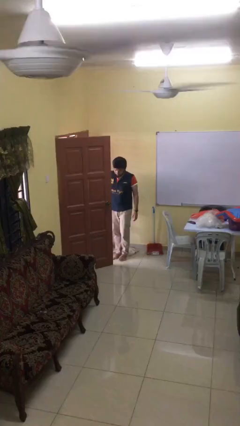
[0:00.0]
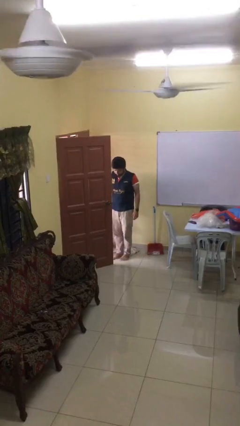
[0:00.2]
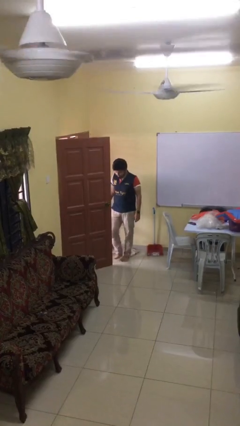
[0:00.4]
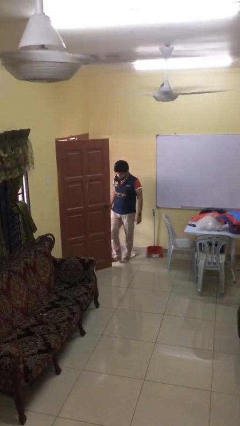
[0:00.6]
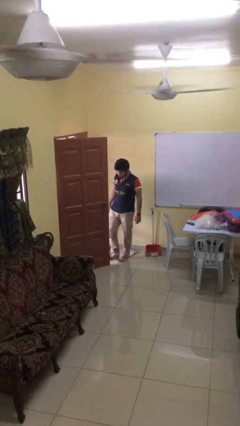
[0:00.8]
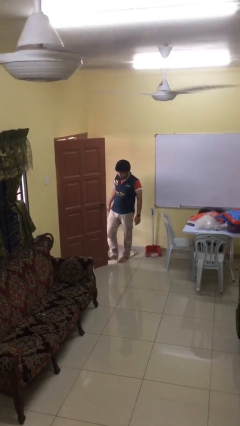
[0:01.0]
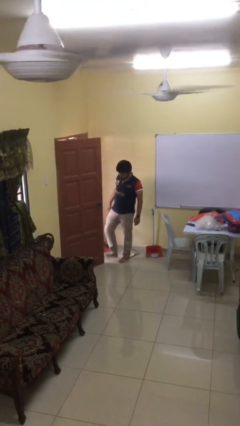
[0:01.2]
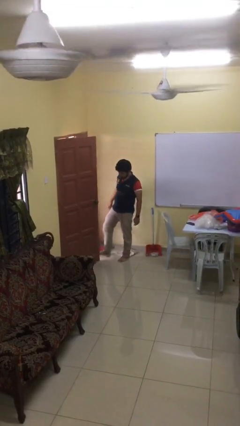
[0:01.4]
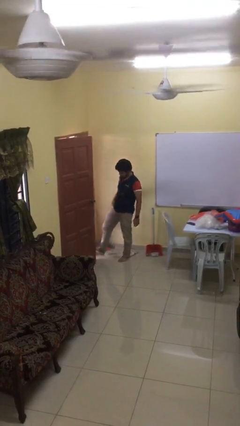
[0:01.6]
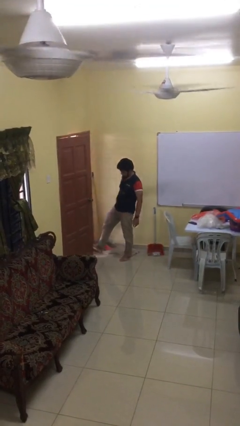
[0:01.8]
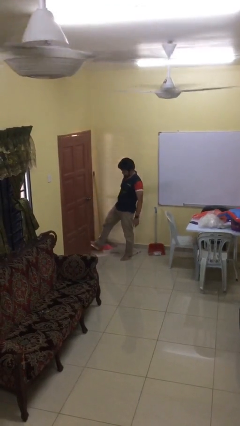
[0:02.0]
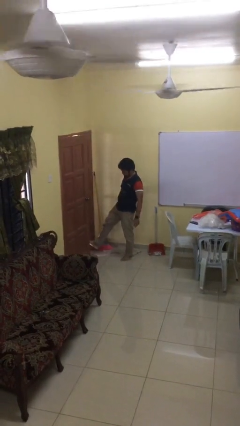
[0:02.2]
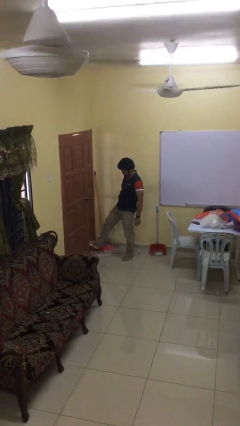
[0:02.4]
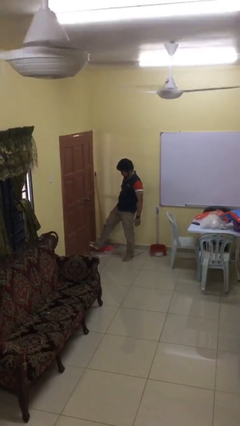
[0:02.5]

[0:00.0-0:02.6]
person closes door with foot

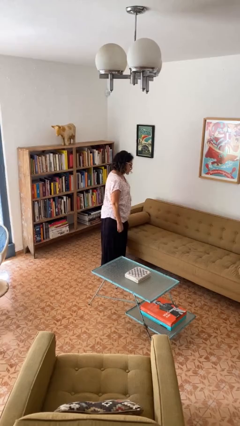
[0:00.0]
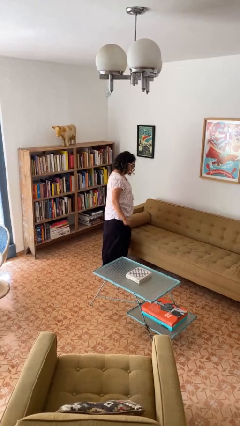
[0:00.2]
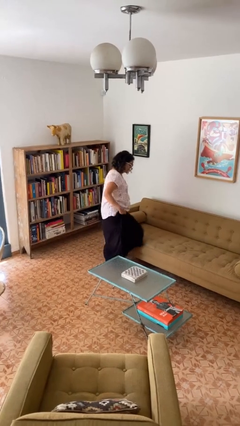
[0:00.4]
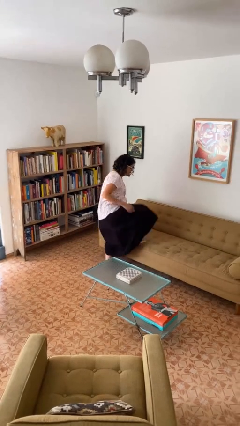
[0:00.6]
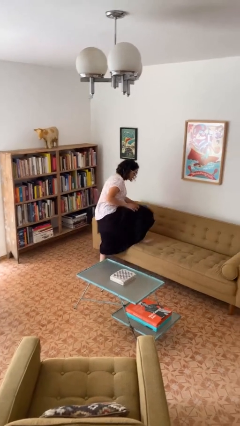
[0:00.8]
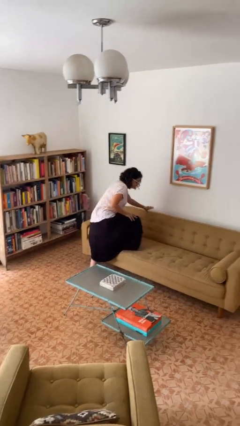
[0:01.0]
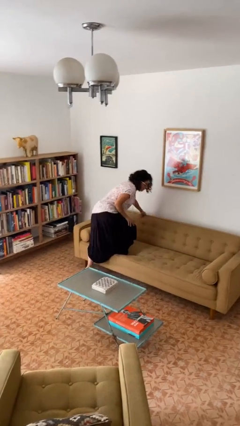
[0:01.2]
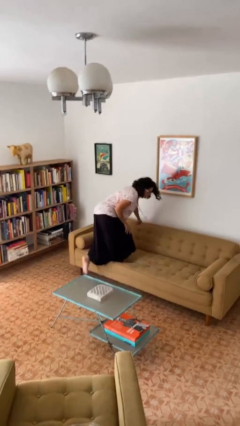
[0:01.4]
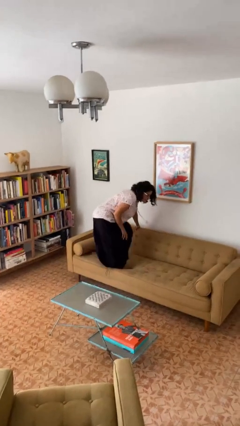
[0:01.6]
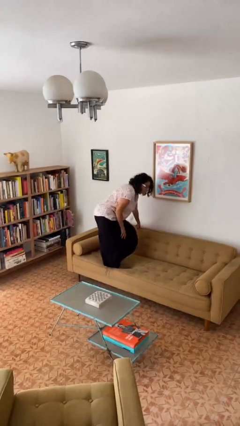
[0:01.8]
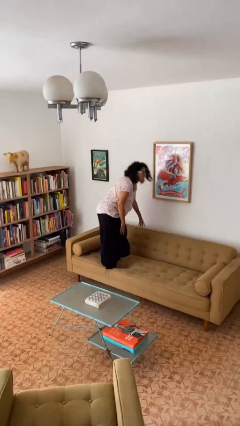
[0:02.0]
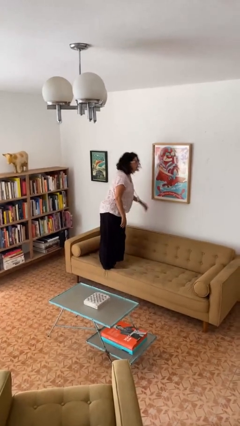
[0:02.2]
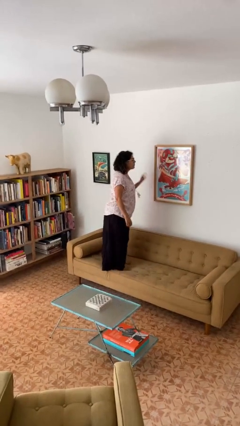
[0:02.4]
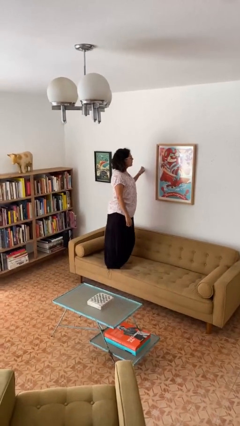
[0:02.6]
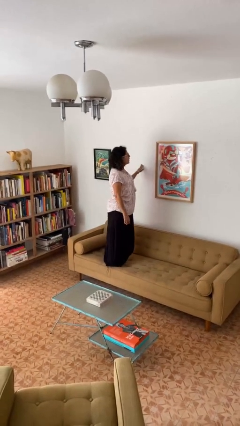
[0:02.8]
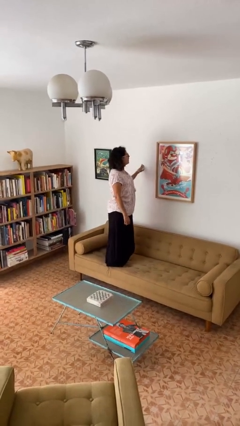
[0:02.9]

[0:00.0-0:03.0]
person climbs on couch

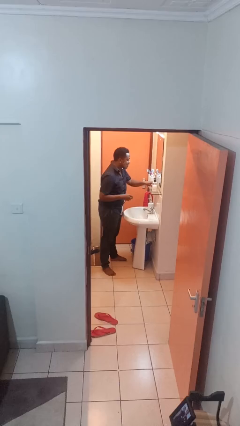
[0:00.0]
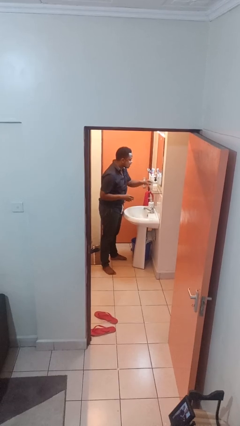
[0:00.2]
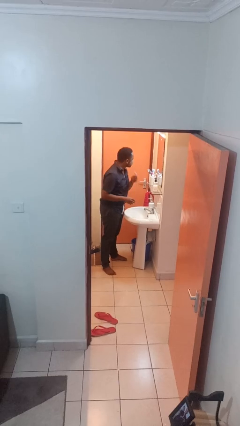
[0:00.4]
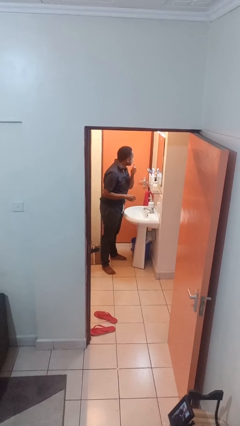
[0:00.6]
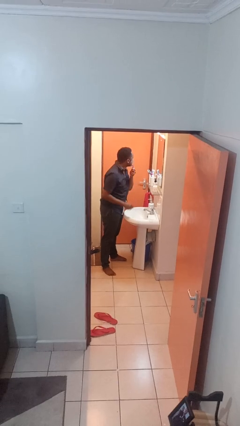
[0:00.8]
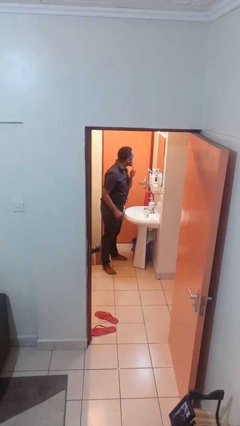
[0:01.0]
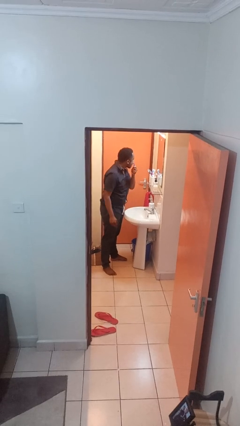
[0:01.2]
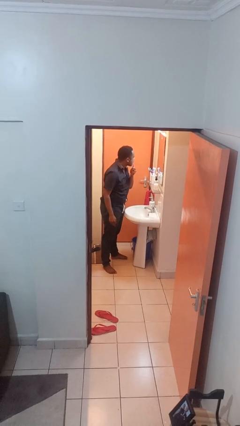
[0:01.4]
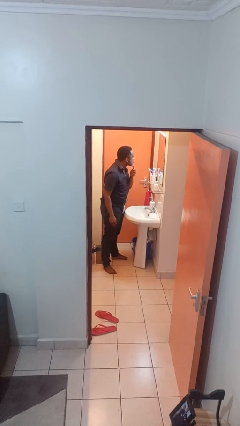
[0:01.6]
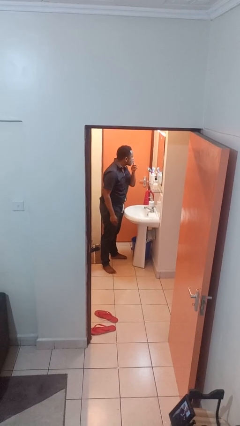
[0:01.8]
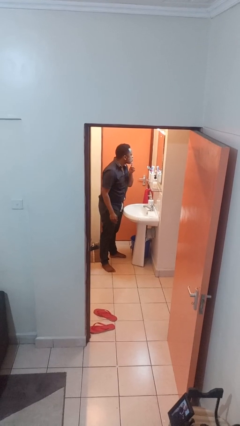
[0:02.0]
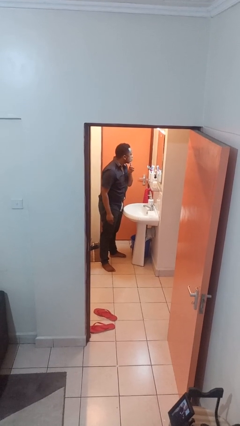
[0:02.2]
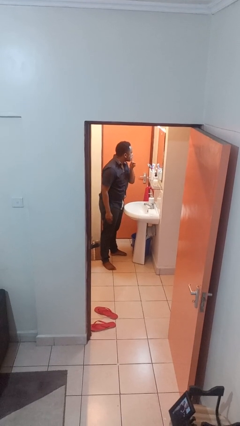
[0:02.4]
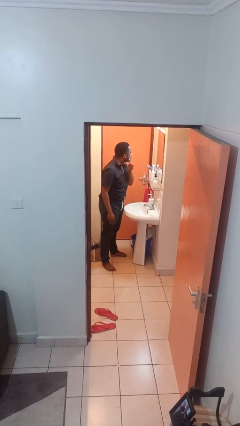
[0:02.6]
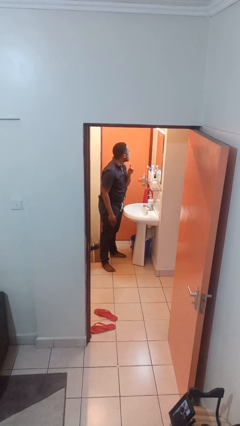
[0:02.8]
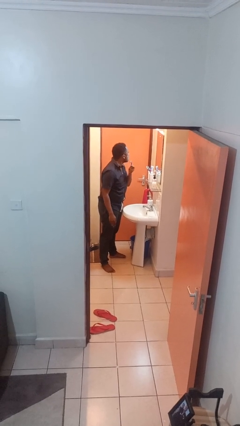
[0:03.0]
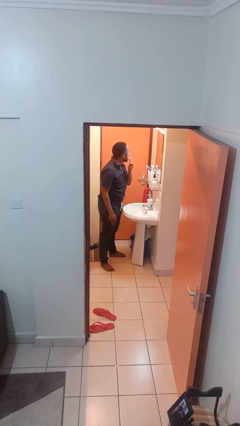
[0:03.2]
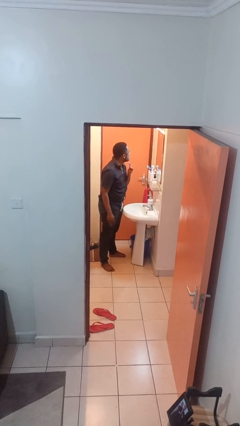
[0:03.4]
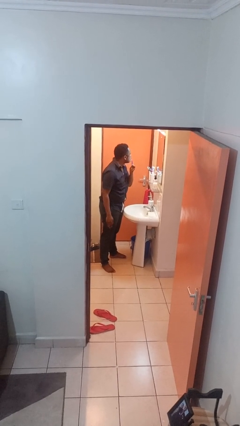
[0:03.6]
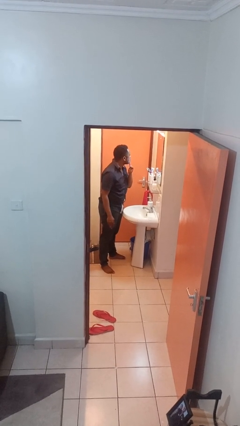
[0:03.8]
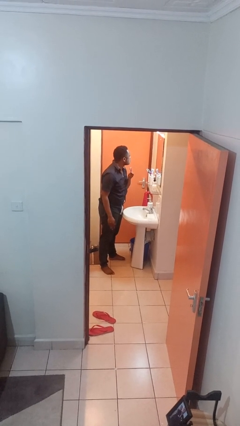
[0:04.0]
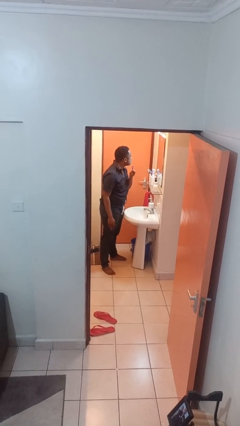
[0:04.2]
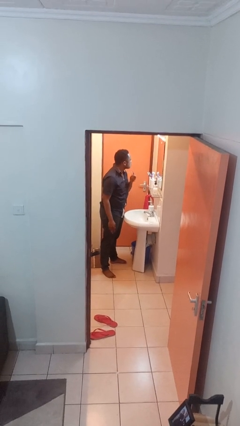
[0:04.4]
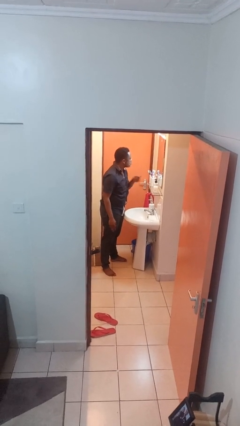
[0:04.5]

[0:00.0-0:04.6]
person shaves face

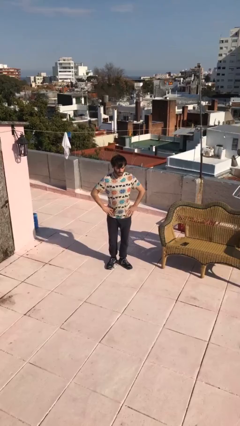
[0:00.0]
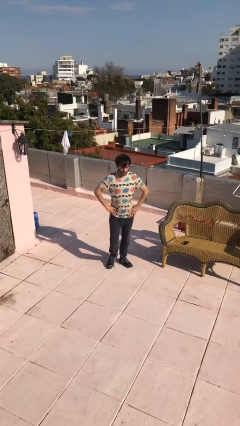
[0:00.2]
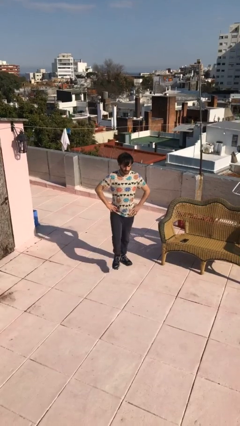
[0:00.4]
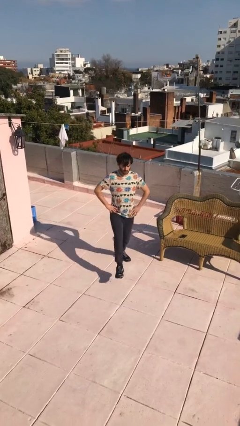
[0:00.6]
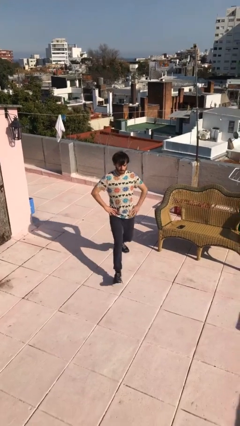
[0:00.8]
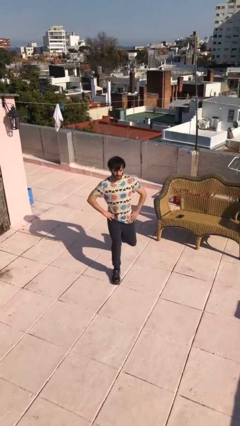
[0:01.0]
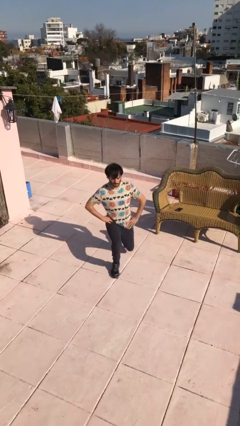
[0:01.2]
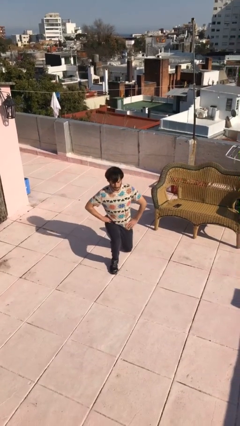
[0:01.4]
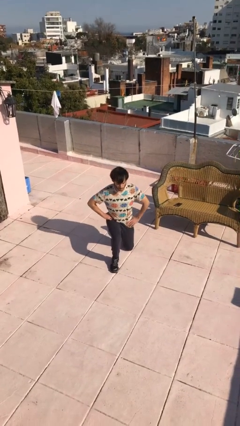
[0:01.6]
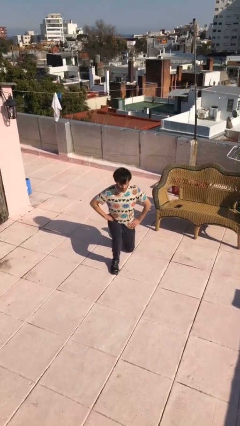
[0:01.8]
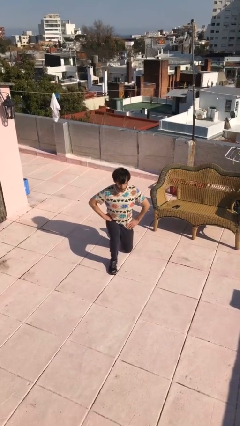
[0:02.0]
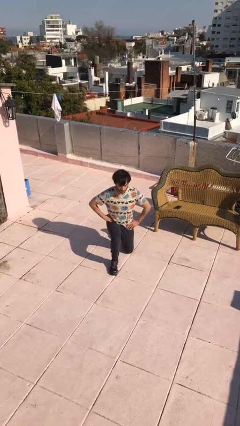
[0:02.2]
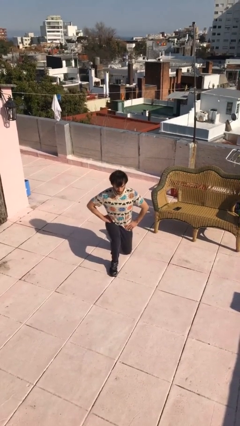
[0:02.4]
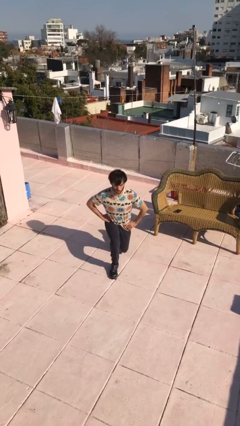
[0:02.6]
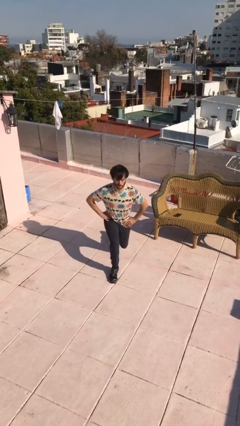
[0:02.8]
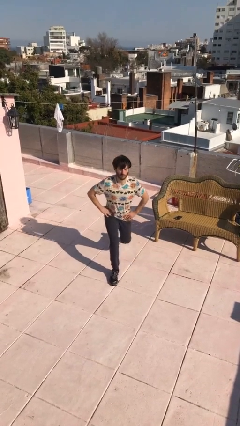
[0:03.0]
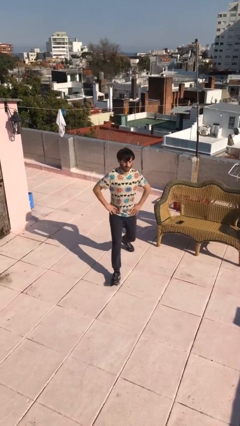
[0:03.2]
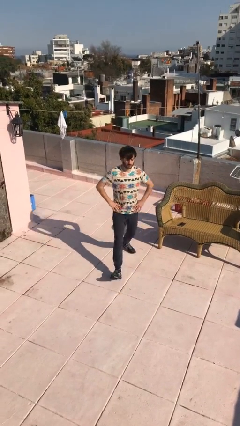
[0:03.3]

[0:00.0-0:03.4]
person exercises with lunges

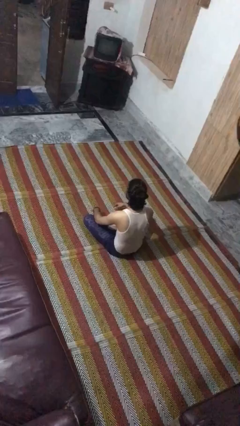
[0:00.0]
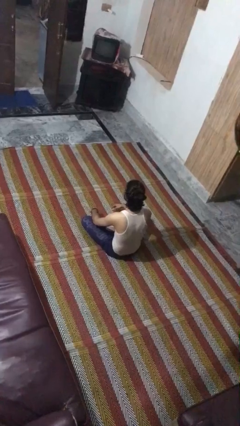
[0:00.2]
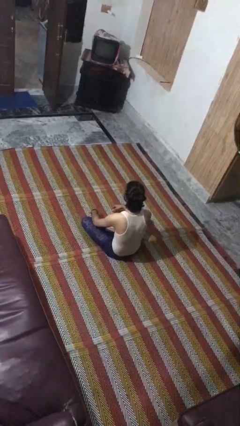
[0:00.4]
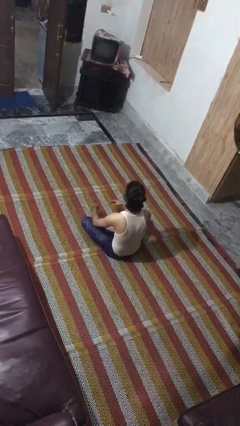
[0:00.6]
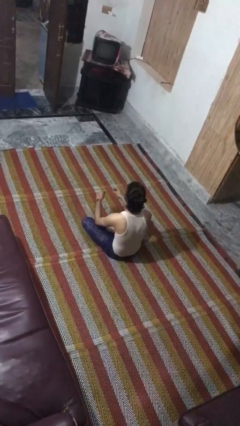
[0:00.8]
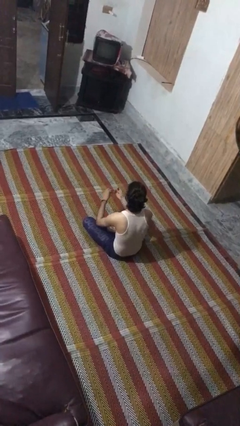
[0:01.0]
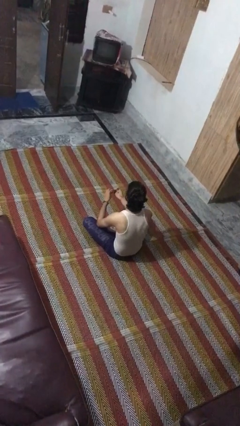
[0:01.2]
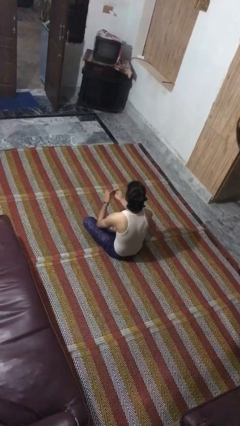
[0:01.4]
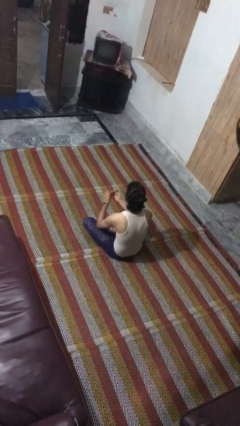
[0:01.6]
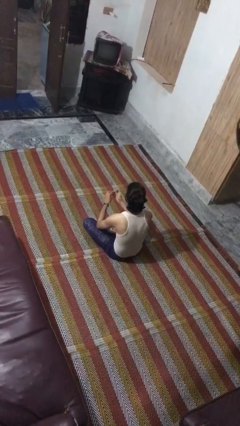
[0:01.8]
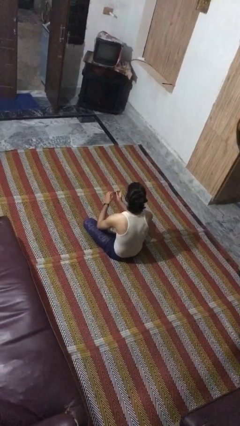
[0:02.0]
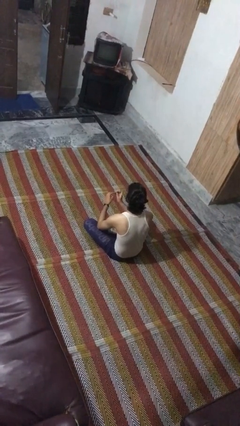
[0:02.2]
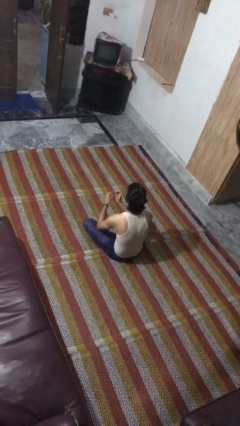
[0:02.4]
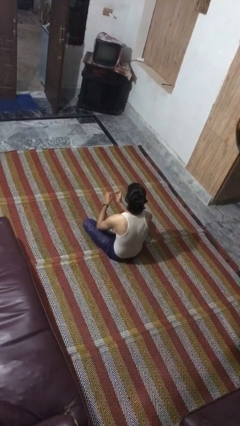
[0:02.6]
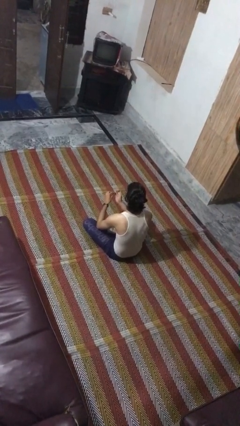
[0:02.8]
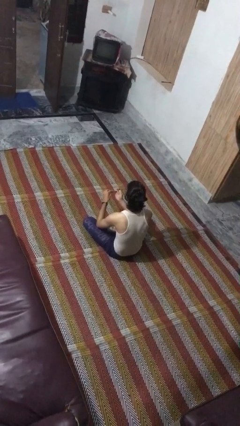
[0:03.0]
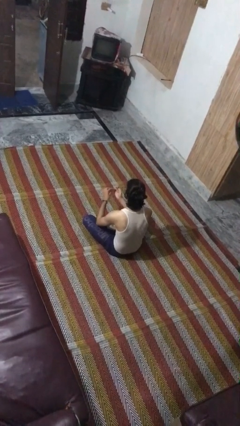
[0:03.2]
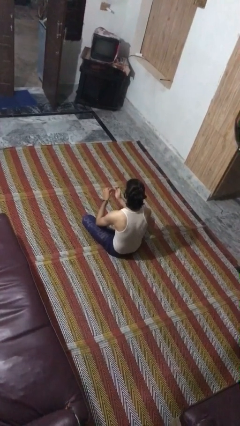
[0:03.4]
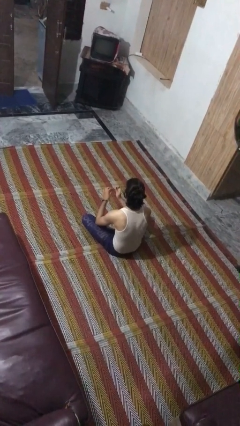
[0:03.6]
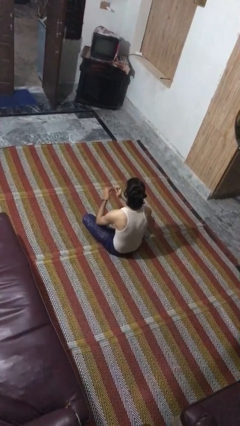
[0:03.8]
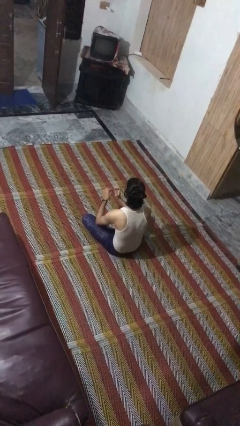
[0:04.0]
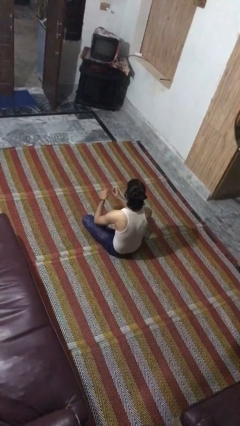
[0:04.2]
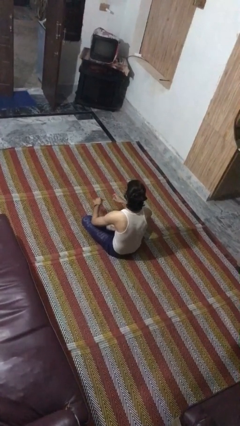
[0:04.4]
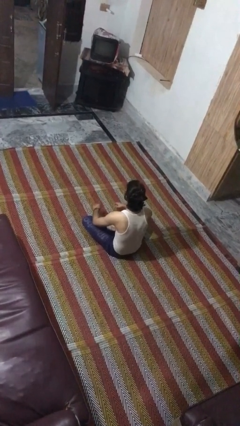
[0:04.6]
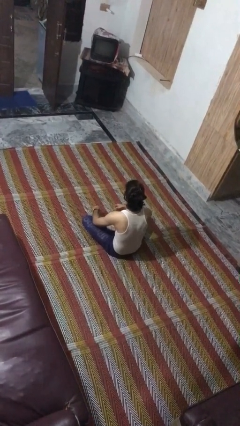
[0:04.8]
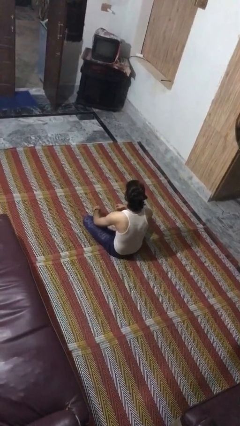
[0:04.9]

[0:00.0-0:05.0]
person files fingernails
